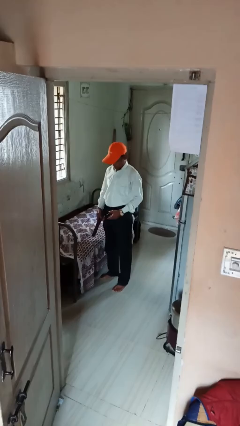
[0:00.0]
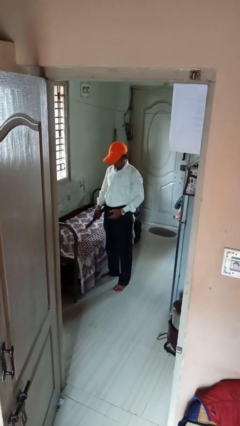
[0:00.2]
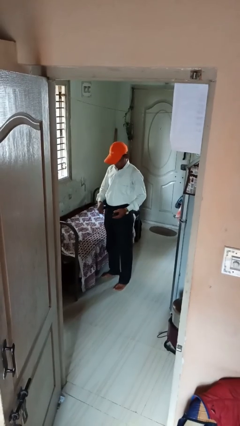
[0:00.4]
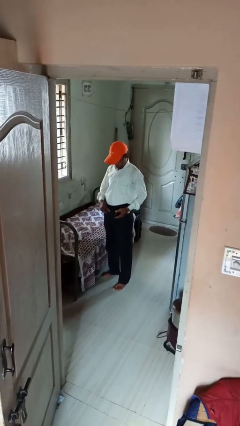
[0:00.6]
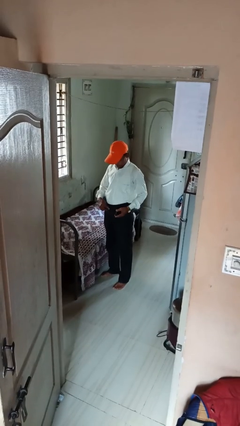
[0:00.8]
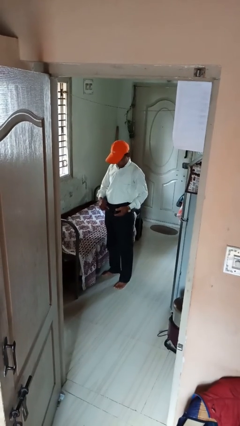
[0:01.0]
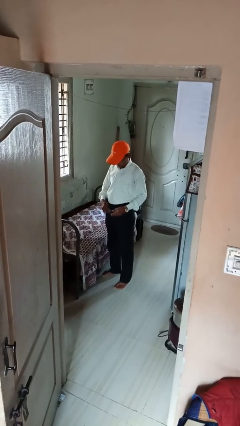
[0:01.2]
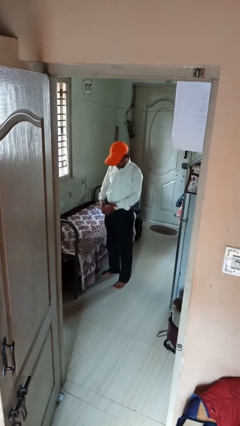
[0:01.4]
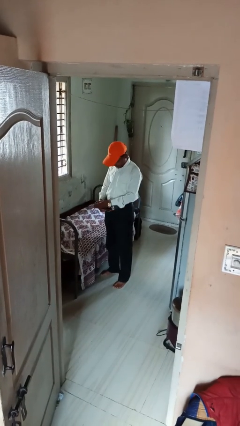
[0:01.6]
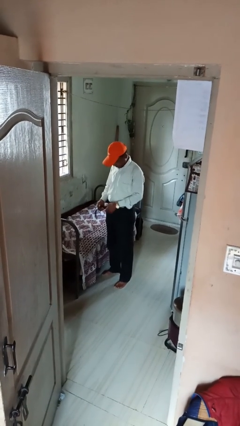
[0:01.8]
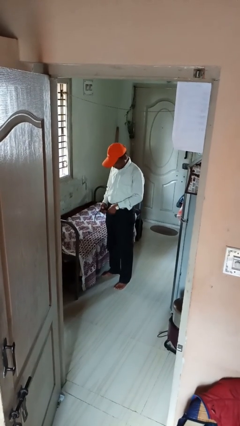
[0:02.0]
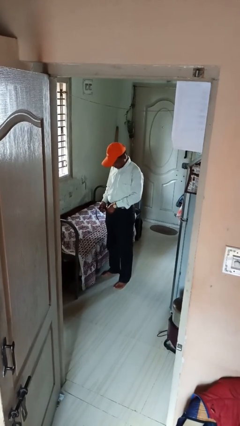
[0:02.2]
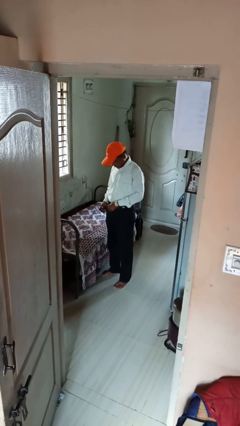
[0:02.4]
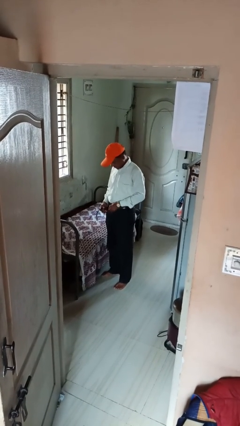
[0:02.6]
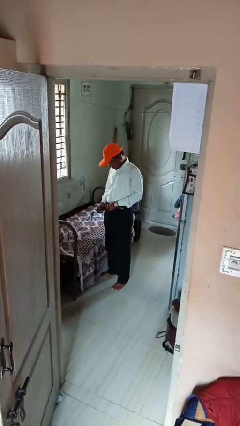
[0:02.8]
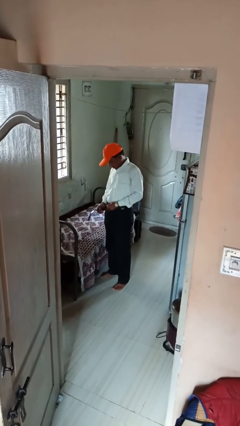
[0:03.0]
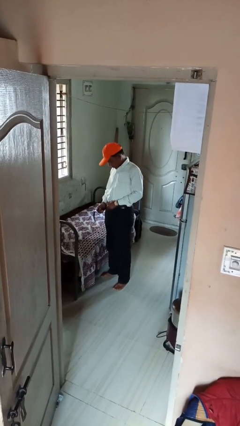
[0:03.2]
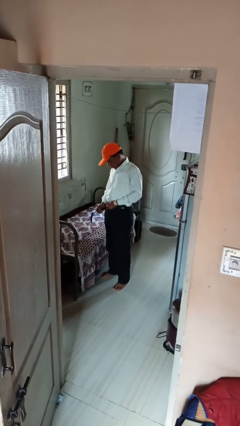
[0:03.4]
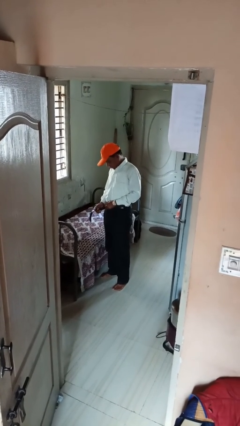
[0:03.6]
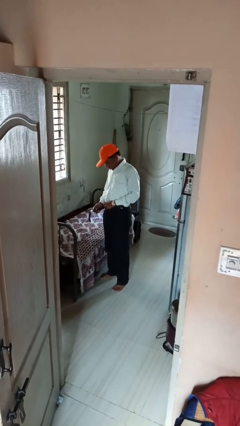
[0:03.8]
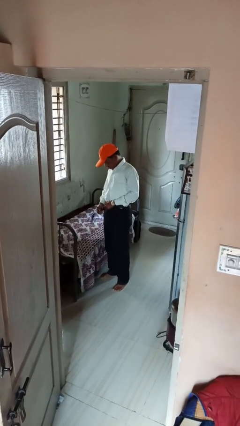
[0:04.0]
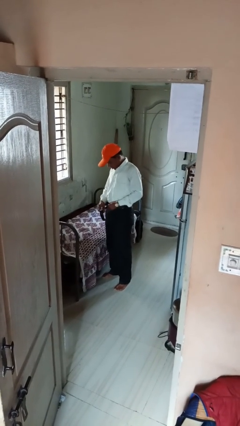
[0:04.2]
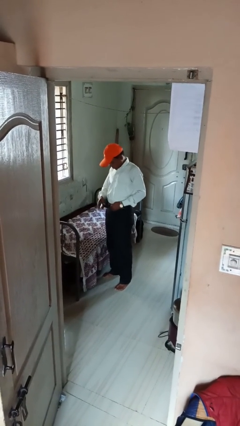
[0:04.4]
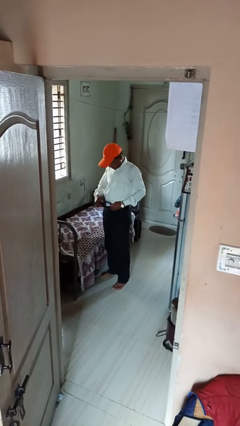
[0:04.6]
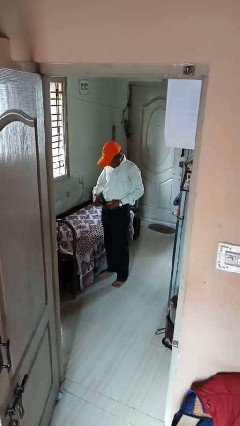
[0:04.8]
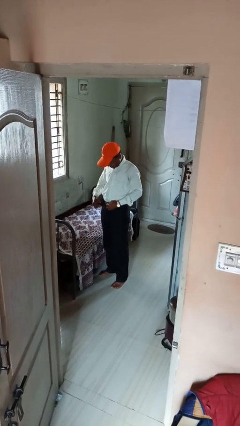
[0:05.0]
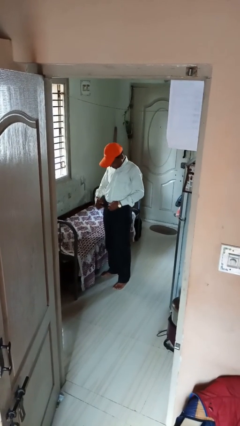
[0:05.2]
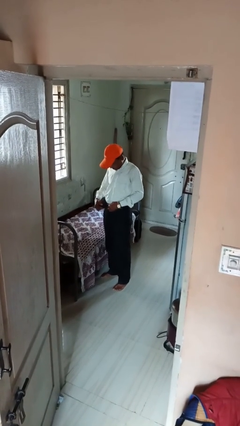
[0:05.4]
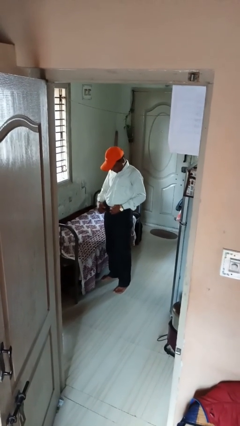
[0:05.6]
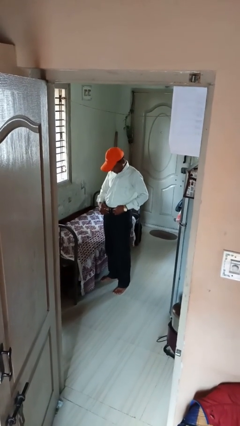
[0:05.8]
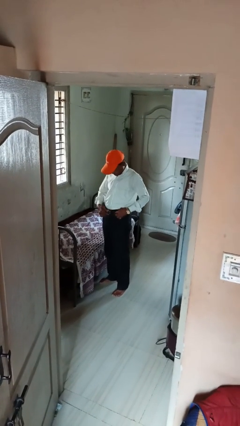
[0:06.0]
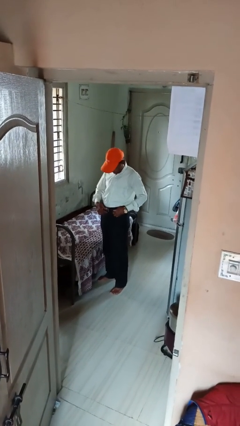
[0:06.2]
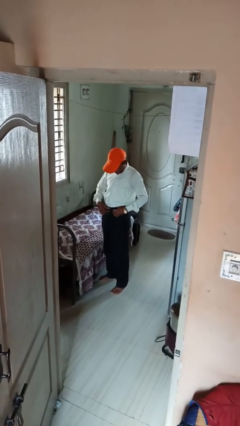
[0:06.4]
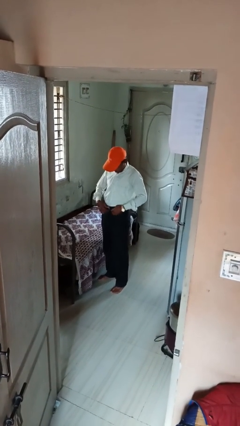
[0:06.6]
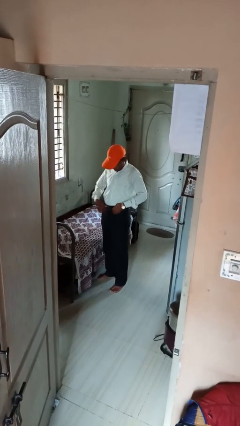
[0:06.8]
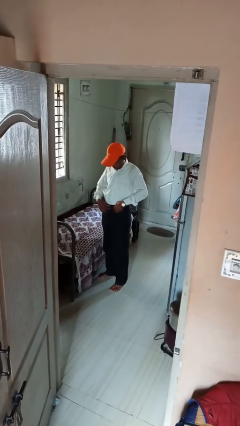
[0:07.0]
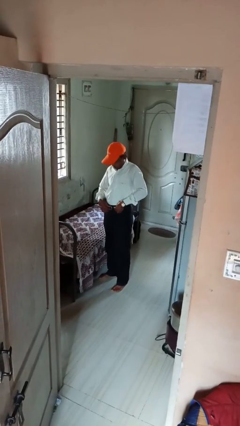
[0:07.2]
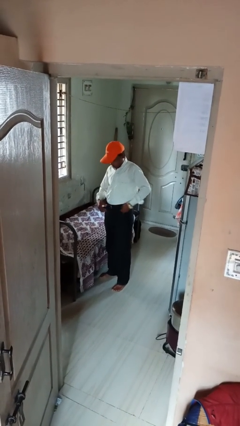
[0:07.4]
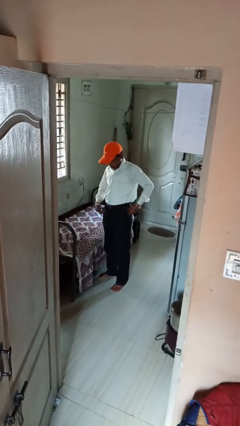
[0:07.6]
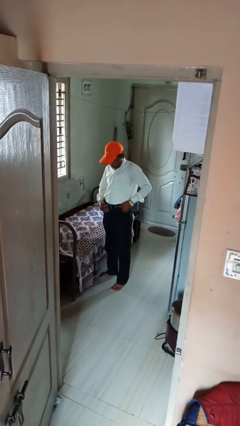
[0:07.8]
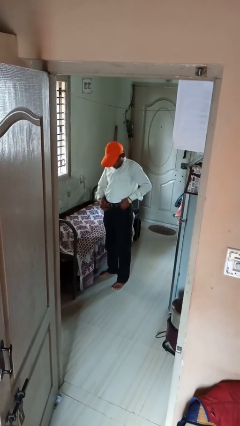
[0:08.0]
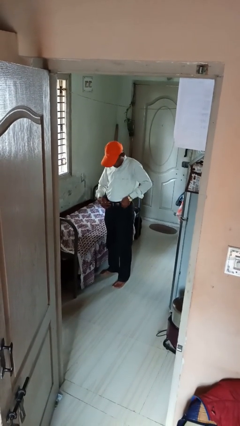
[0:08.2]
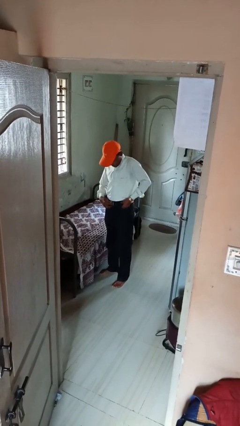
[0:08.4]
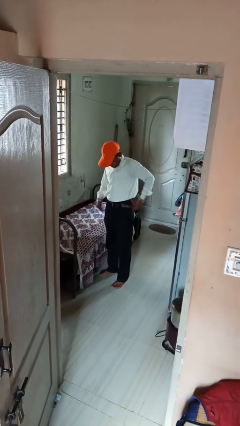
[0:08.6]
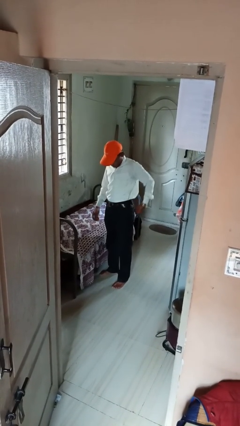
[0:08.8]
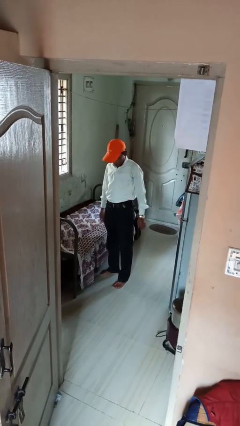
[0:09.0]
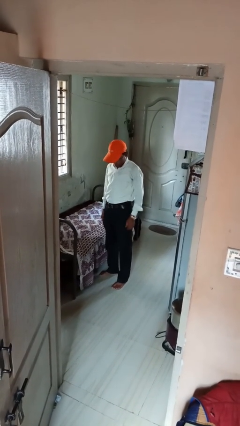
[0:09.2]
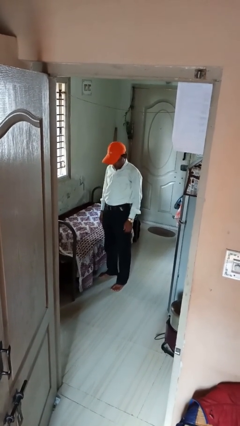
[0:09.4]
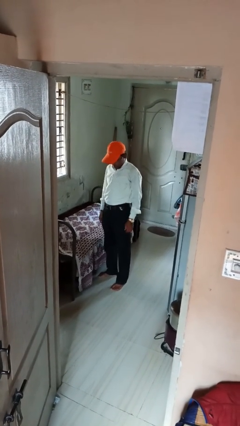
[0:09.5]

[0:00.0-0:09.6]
person puts on belt

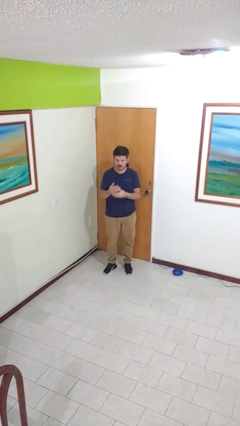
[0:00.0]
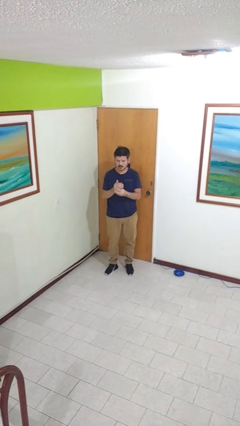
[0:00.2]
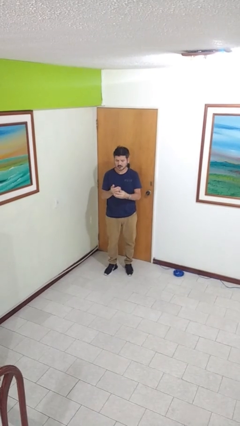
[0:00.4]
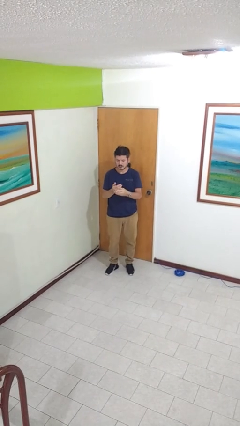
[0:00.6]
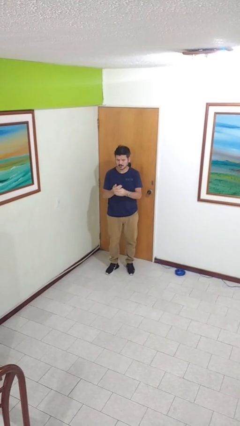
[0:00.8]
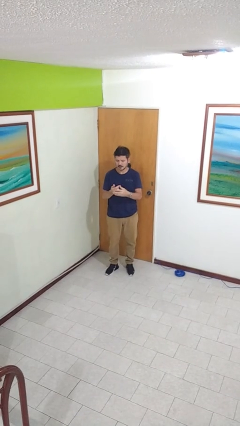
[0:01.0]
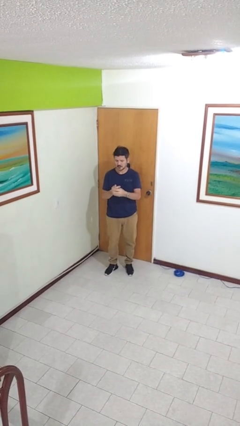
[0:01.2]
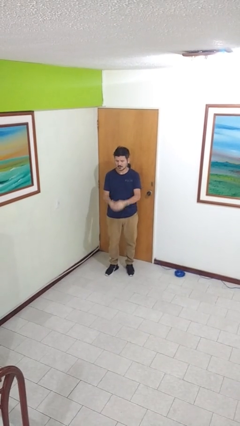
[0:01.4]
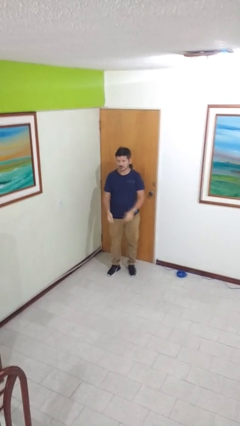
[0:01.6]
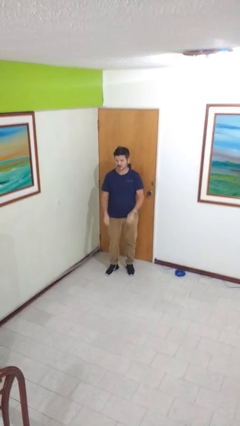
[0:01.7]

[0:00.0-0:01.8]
person cracks knuckles

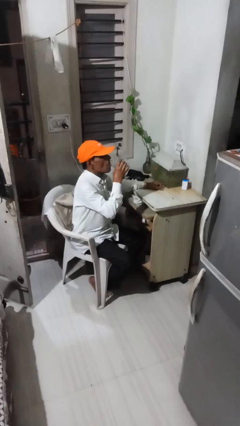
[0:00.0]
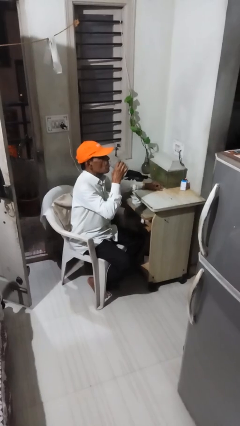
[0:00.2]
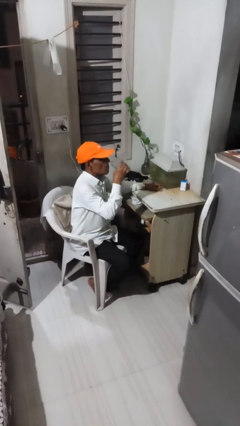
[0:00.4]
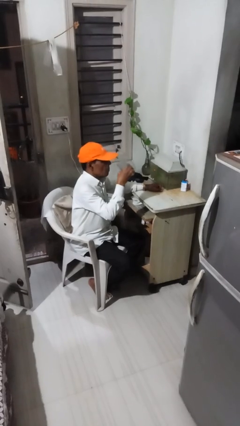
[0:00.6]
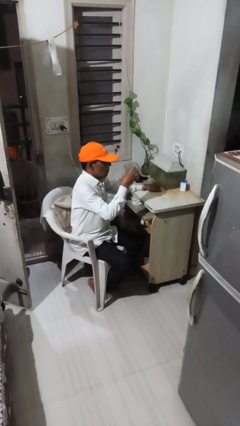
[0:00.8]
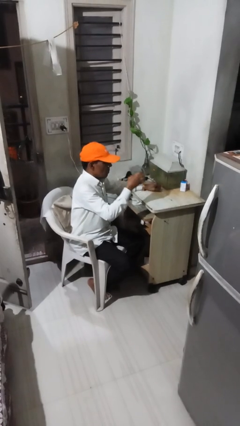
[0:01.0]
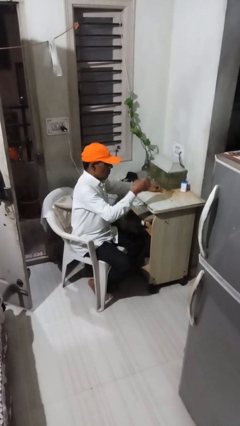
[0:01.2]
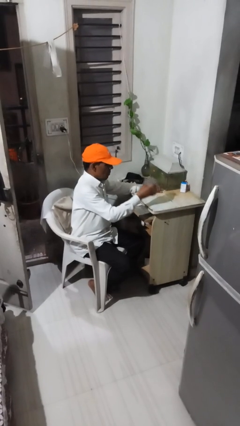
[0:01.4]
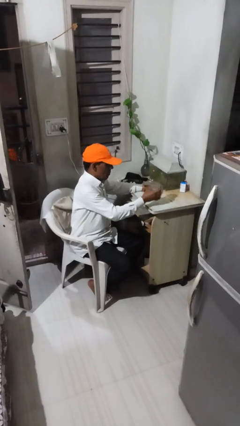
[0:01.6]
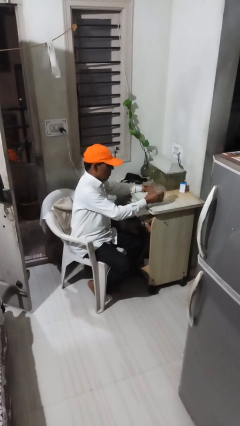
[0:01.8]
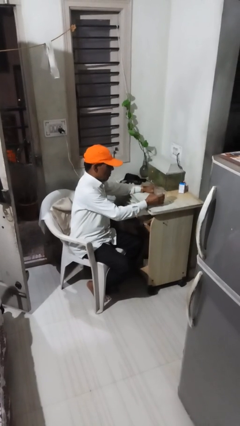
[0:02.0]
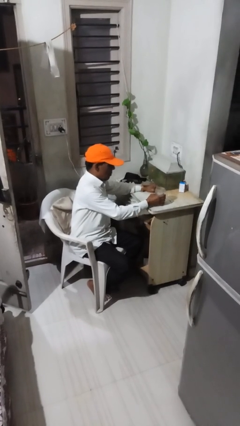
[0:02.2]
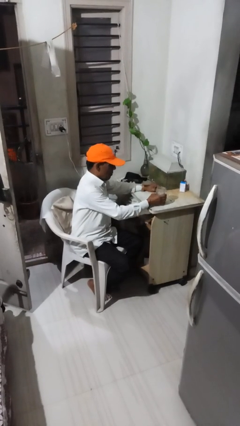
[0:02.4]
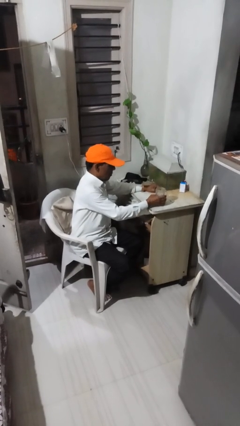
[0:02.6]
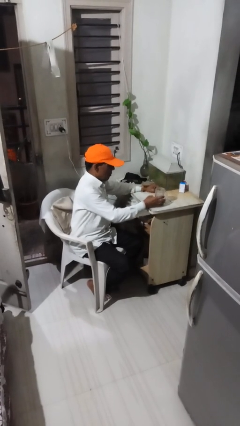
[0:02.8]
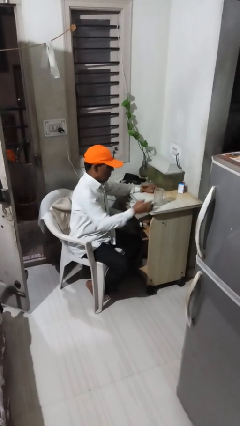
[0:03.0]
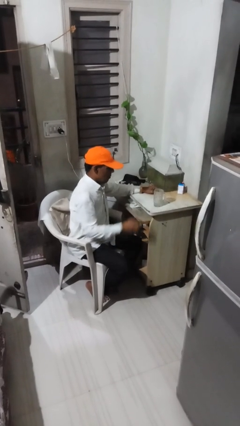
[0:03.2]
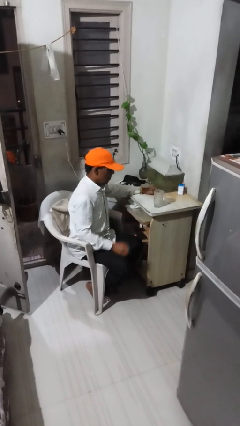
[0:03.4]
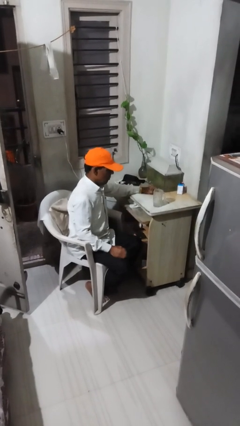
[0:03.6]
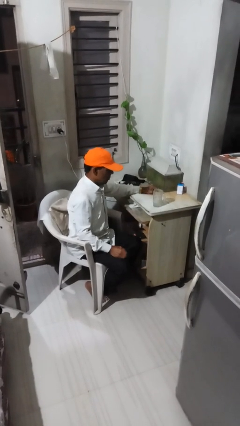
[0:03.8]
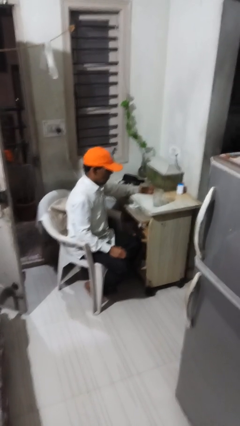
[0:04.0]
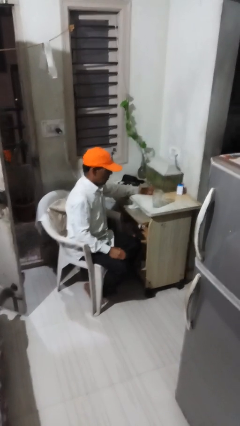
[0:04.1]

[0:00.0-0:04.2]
person puts down object on table

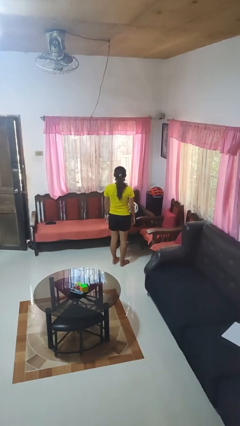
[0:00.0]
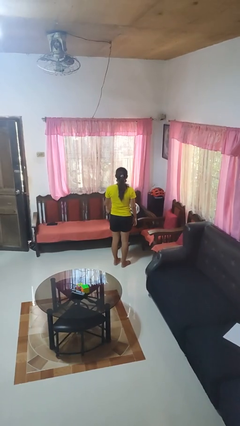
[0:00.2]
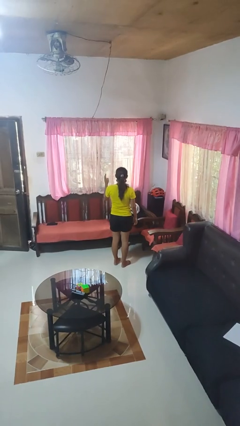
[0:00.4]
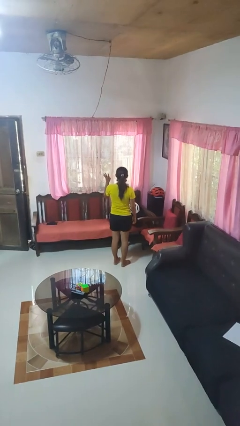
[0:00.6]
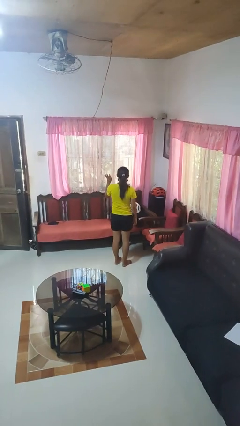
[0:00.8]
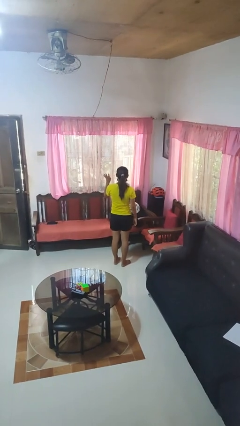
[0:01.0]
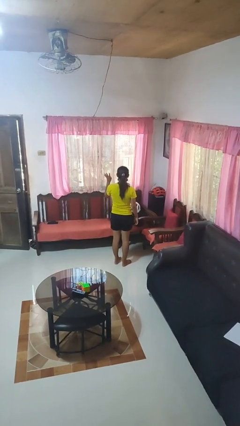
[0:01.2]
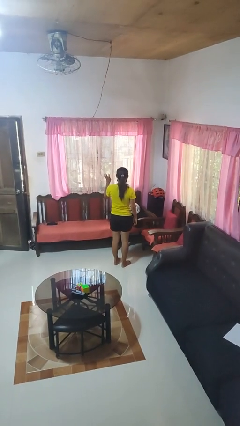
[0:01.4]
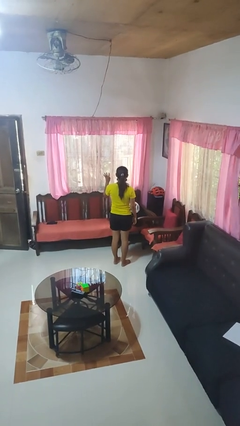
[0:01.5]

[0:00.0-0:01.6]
person gestures number four

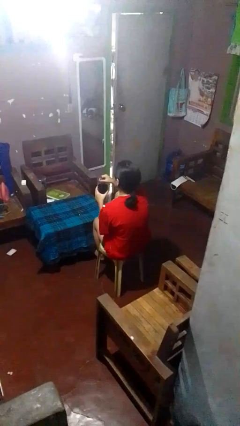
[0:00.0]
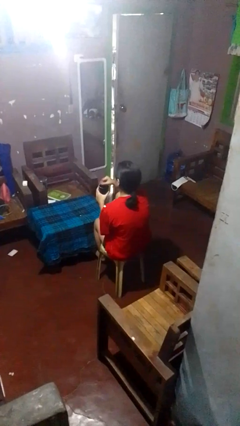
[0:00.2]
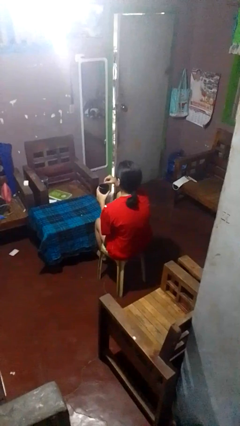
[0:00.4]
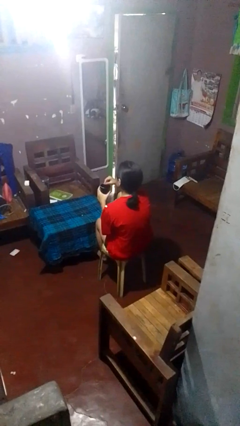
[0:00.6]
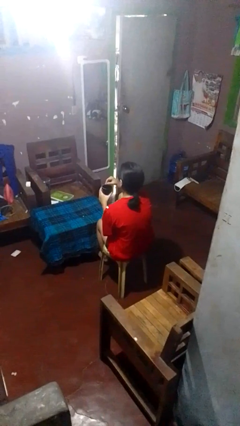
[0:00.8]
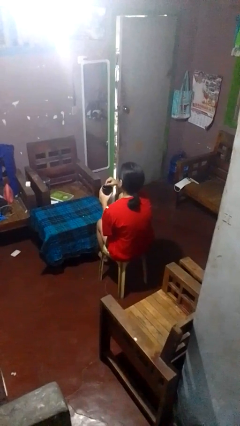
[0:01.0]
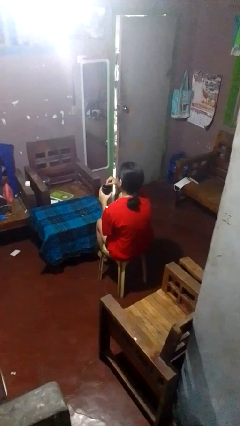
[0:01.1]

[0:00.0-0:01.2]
person stirs mug
